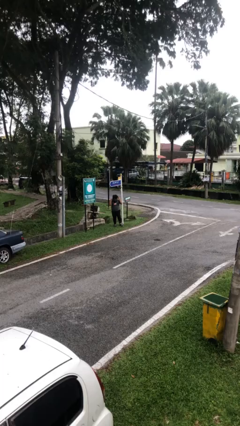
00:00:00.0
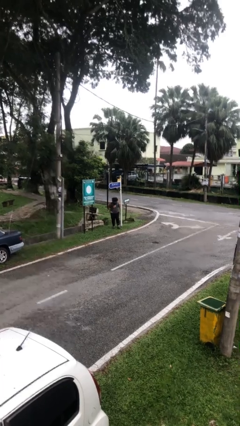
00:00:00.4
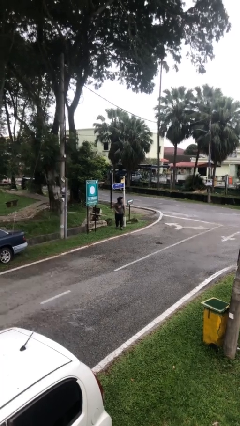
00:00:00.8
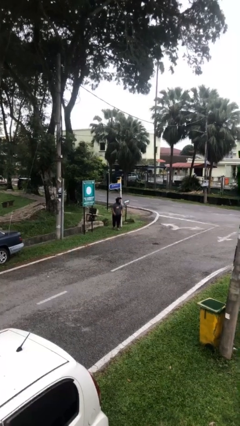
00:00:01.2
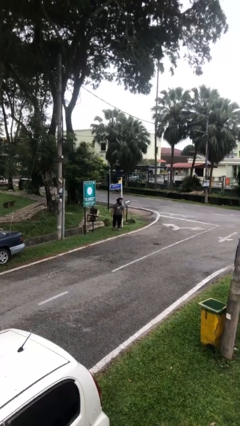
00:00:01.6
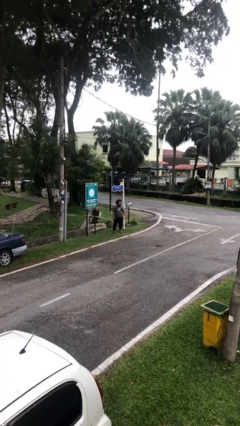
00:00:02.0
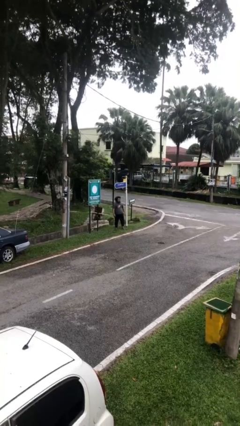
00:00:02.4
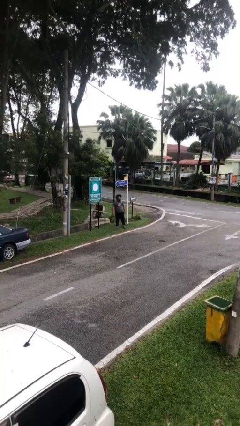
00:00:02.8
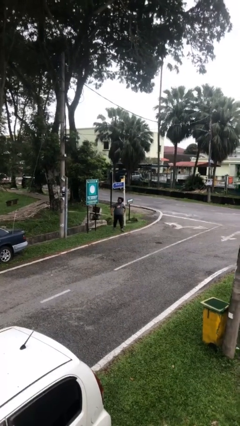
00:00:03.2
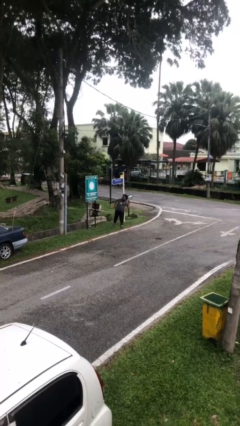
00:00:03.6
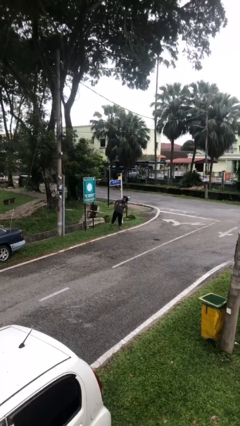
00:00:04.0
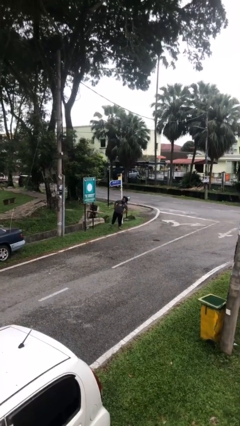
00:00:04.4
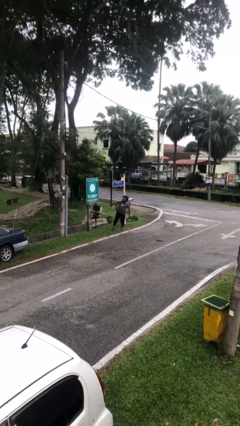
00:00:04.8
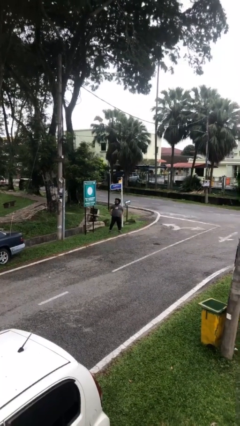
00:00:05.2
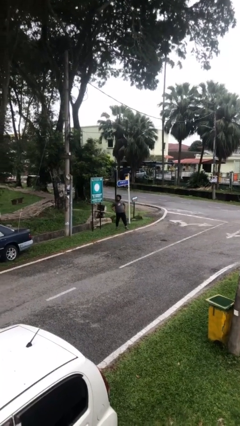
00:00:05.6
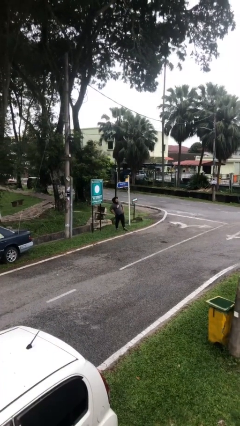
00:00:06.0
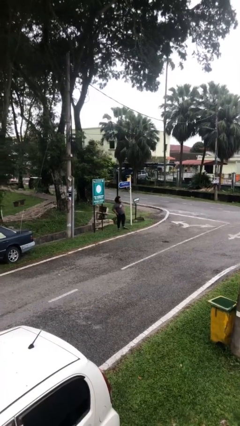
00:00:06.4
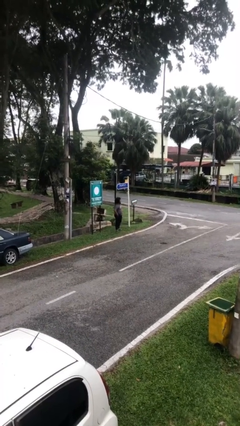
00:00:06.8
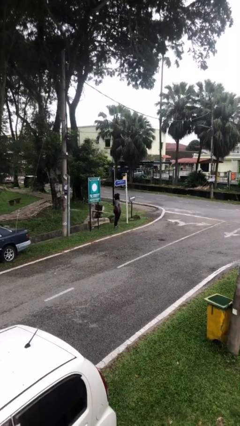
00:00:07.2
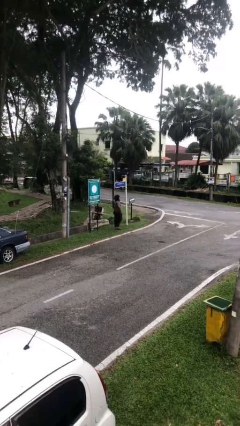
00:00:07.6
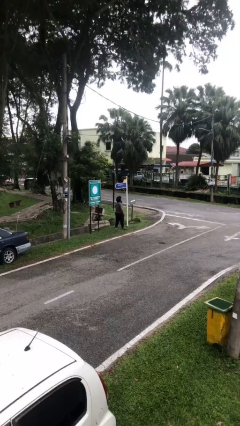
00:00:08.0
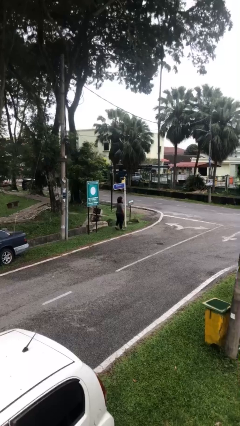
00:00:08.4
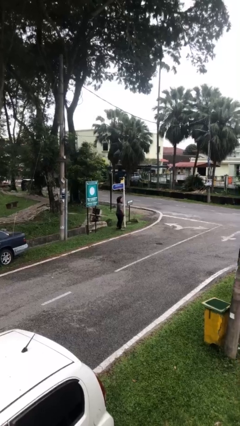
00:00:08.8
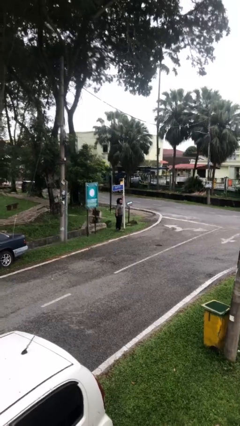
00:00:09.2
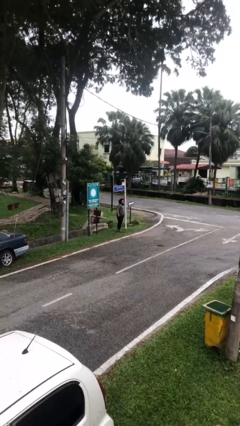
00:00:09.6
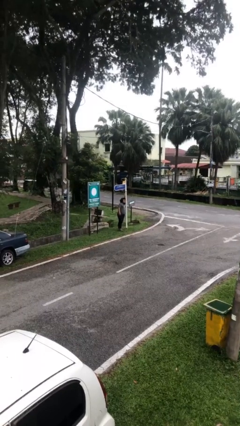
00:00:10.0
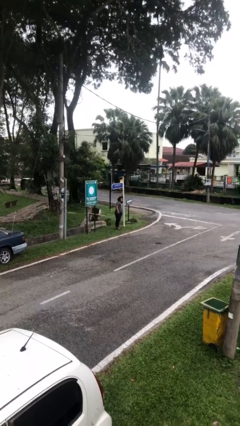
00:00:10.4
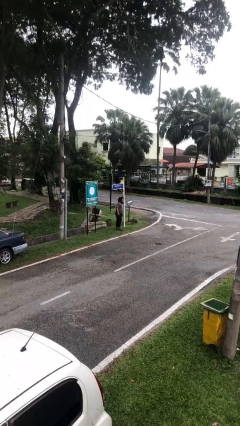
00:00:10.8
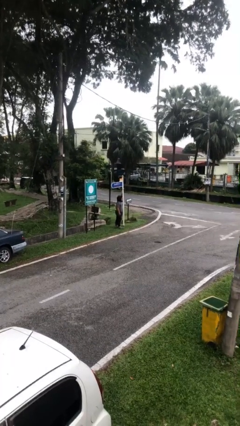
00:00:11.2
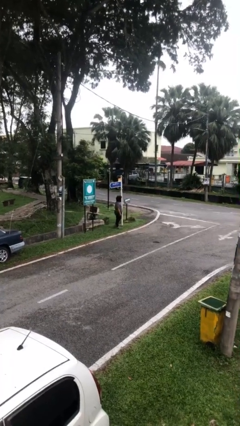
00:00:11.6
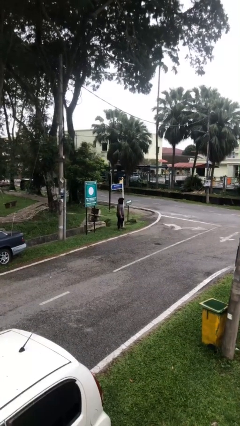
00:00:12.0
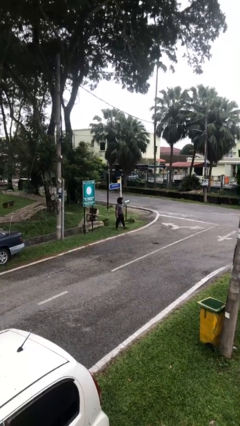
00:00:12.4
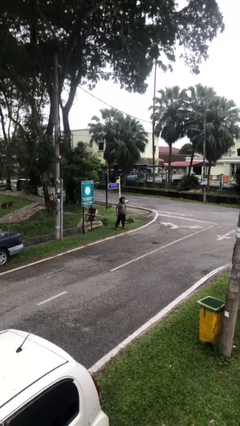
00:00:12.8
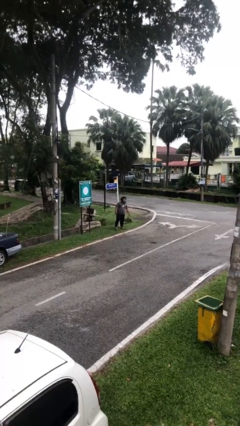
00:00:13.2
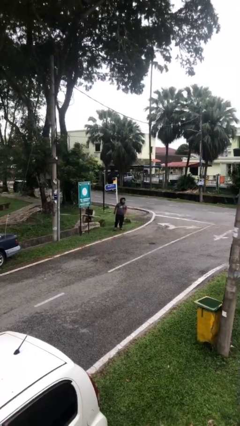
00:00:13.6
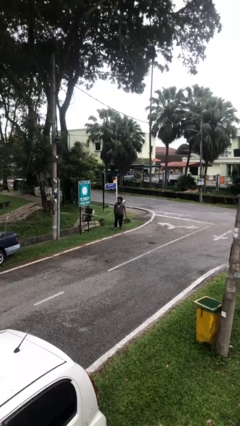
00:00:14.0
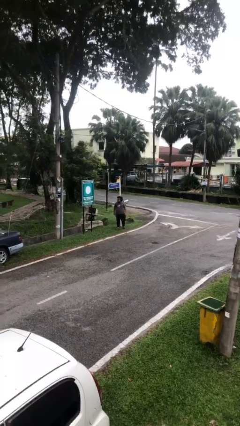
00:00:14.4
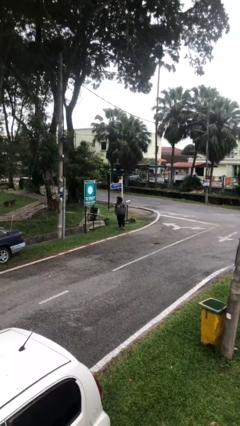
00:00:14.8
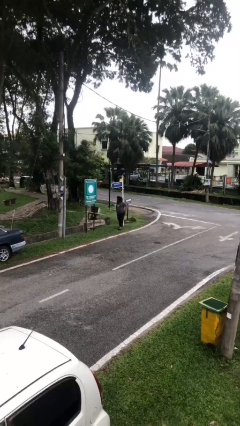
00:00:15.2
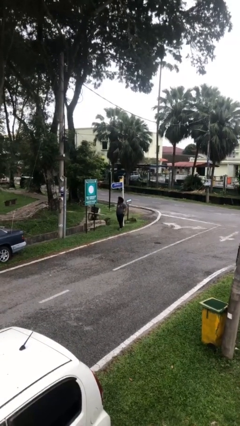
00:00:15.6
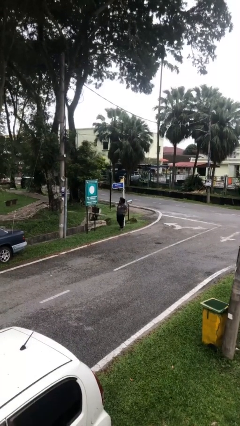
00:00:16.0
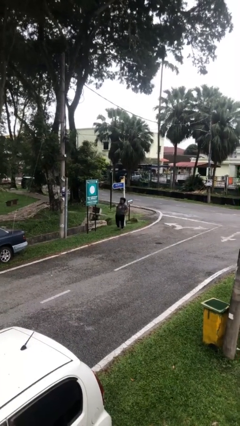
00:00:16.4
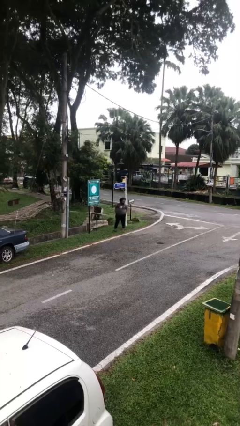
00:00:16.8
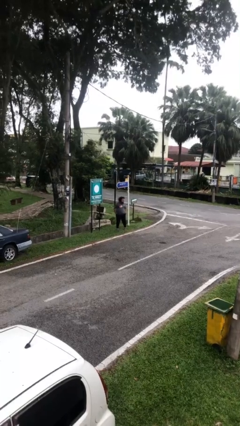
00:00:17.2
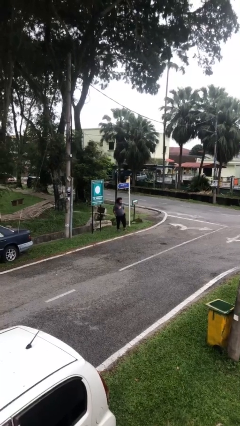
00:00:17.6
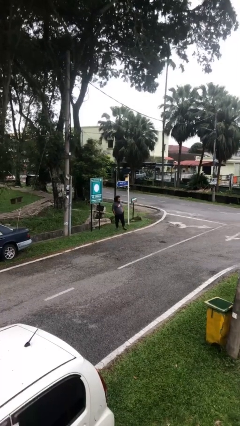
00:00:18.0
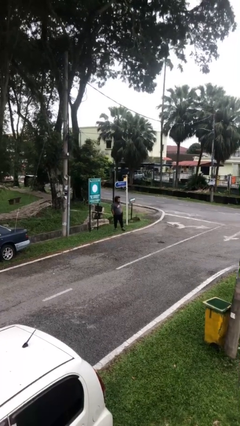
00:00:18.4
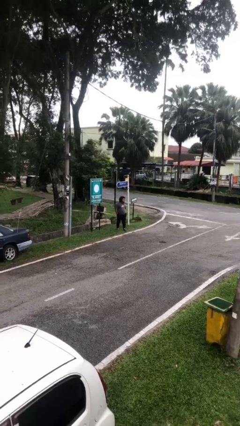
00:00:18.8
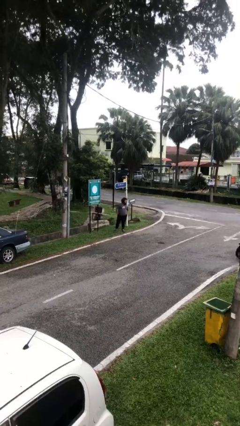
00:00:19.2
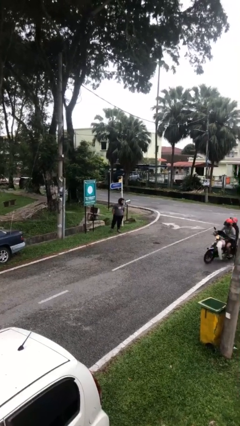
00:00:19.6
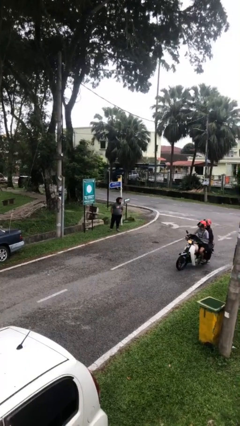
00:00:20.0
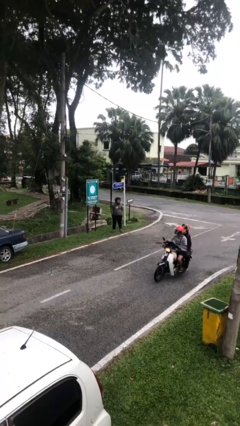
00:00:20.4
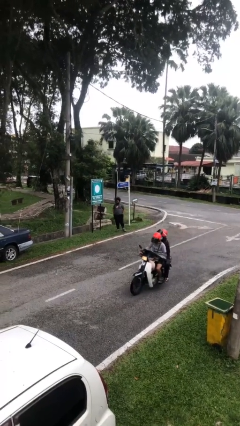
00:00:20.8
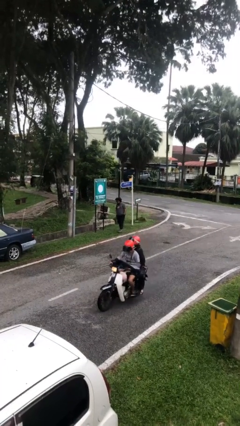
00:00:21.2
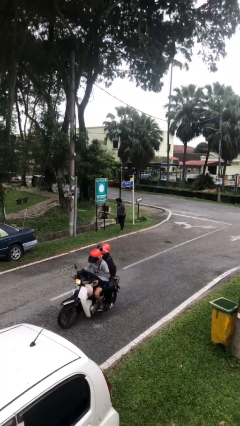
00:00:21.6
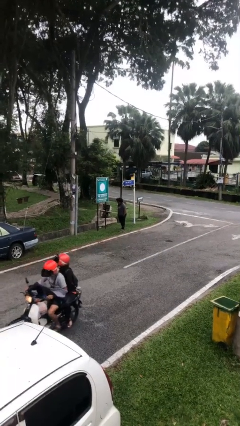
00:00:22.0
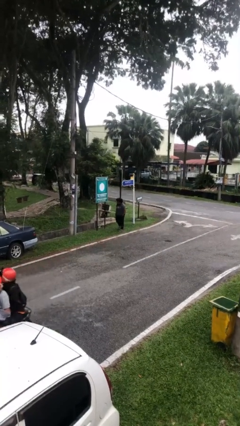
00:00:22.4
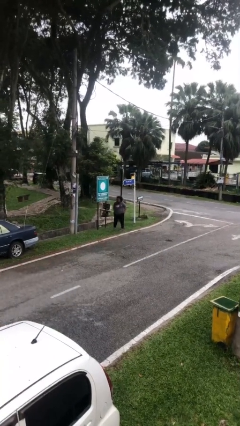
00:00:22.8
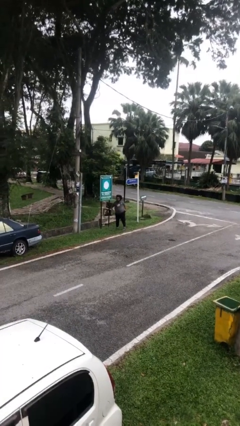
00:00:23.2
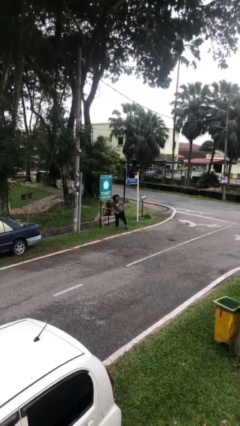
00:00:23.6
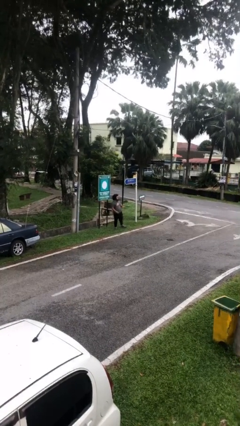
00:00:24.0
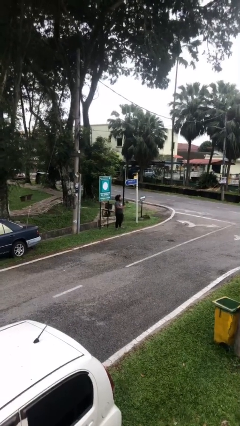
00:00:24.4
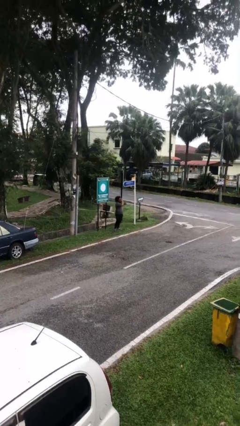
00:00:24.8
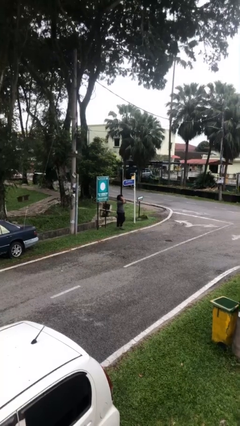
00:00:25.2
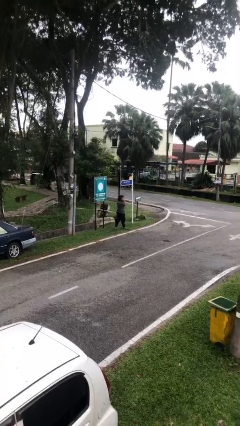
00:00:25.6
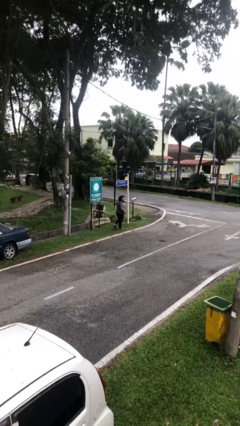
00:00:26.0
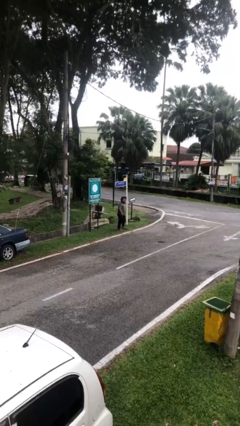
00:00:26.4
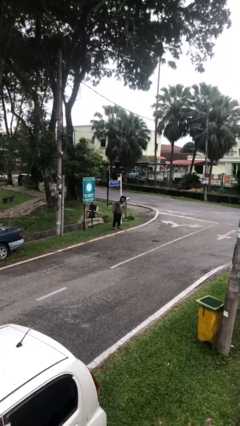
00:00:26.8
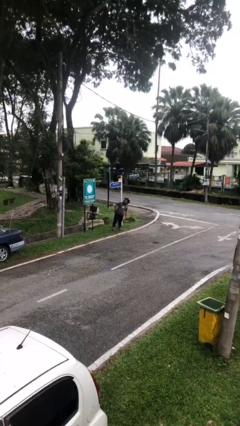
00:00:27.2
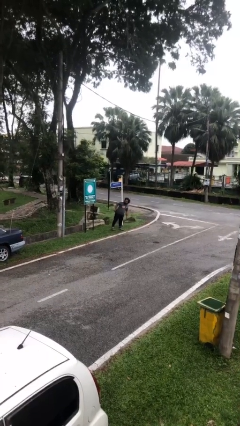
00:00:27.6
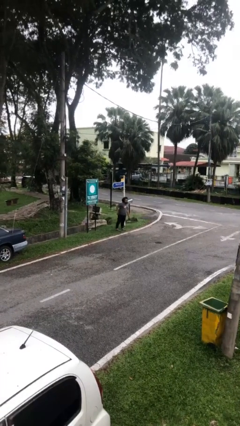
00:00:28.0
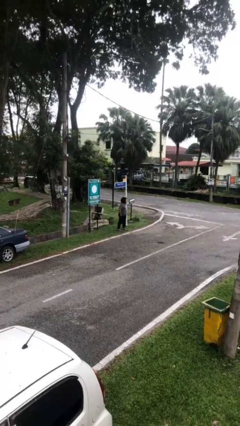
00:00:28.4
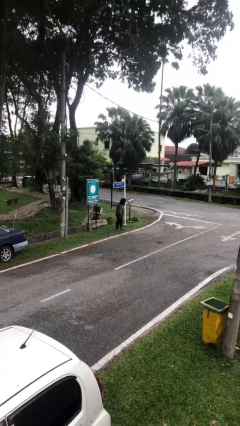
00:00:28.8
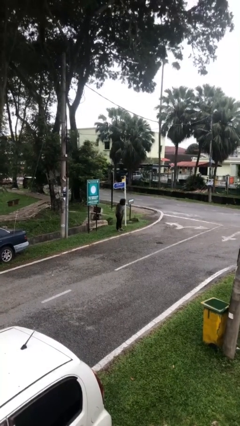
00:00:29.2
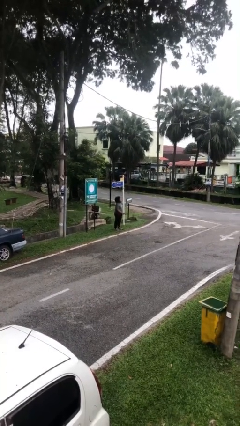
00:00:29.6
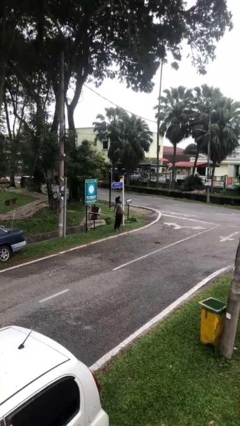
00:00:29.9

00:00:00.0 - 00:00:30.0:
person walks

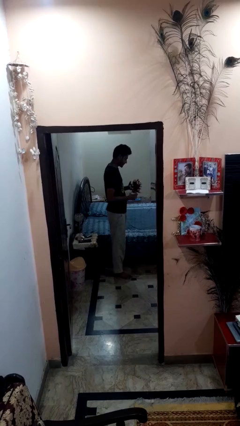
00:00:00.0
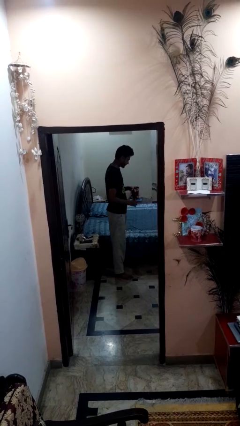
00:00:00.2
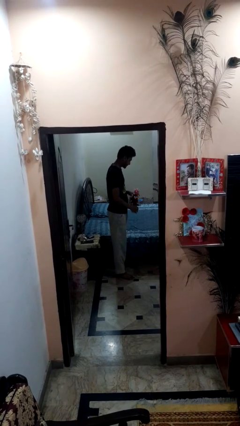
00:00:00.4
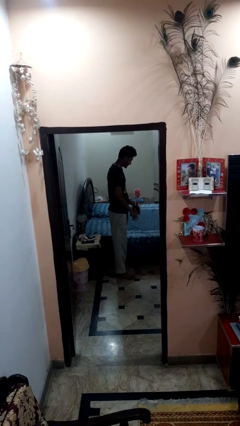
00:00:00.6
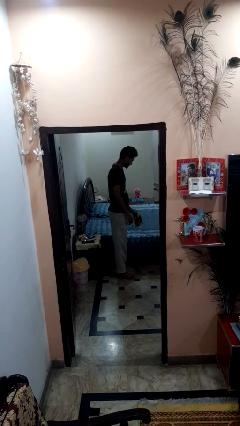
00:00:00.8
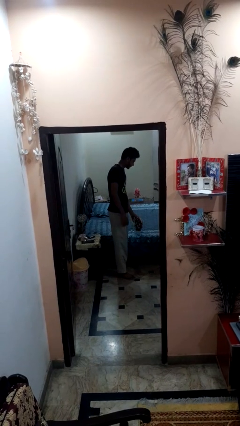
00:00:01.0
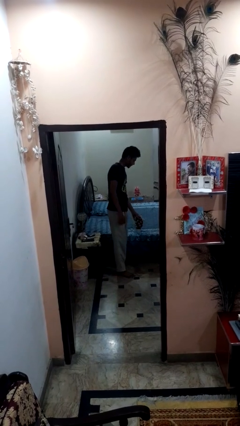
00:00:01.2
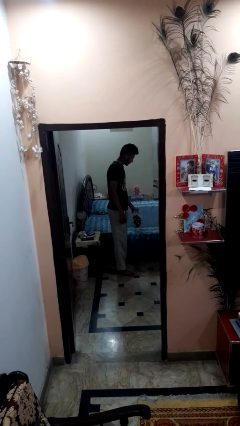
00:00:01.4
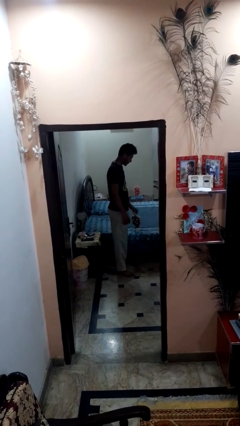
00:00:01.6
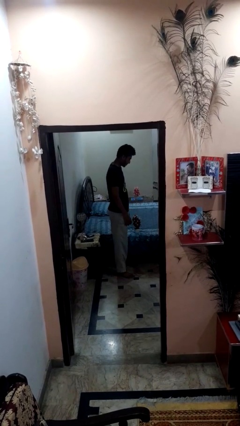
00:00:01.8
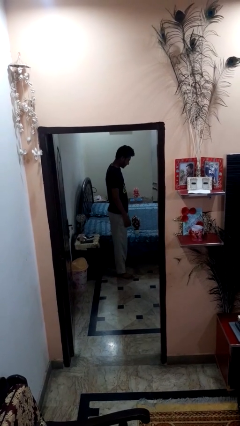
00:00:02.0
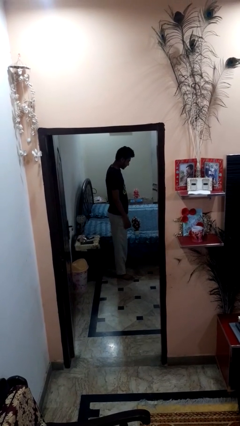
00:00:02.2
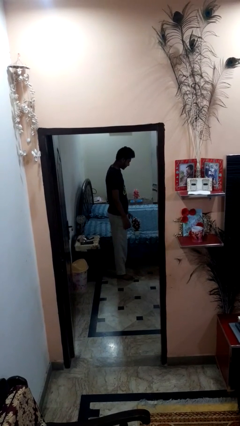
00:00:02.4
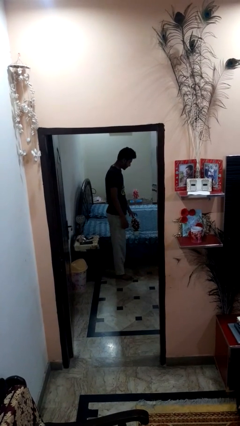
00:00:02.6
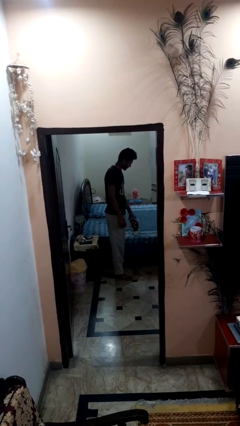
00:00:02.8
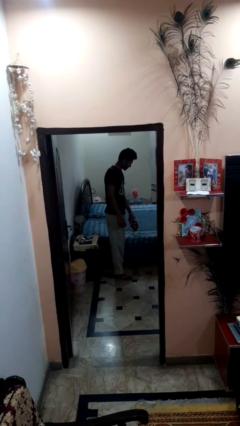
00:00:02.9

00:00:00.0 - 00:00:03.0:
person puts down object on bed

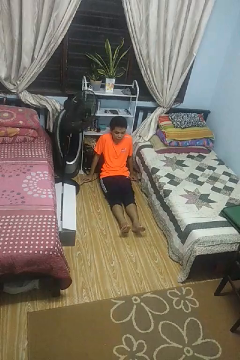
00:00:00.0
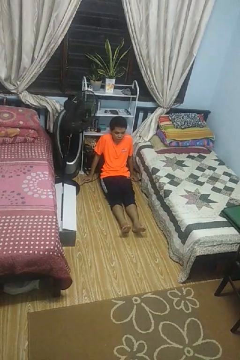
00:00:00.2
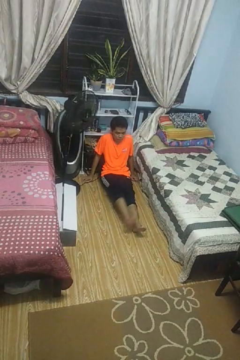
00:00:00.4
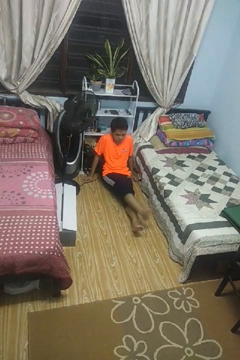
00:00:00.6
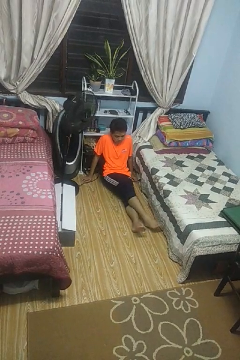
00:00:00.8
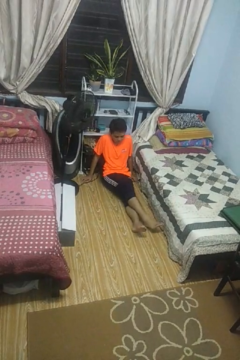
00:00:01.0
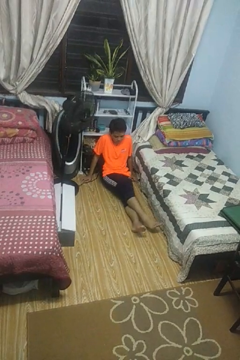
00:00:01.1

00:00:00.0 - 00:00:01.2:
person crosses legs
